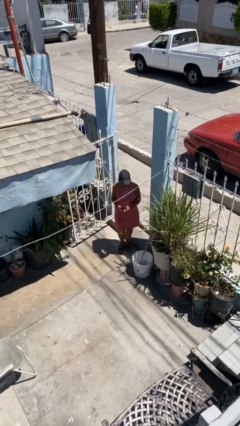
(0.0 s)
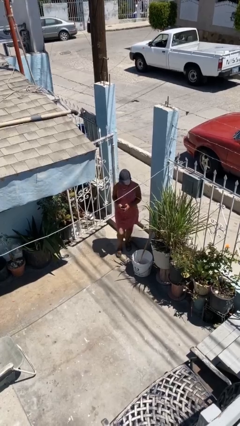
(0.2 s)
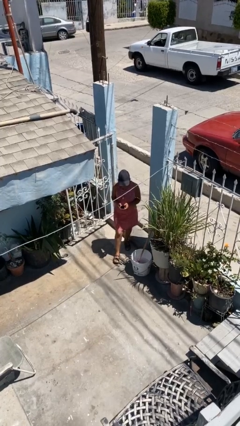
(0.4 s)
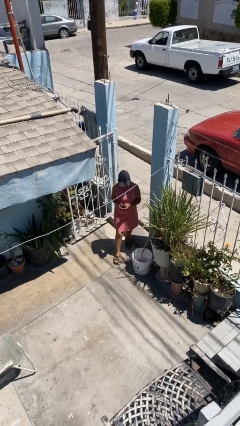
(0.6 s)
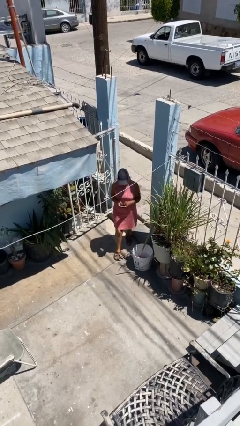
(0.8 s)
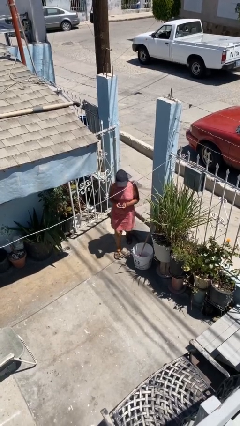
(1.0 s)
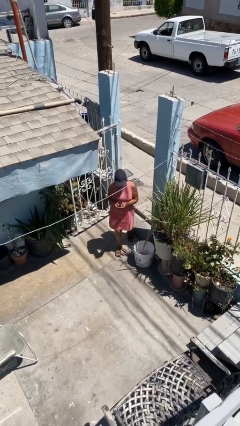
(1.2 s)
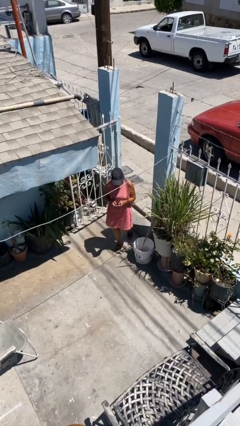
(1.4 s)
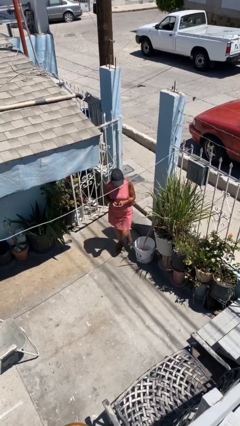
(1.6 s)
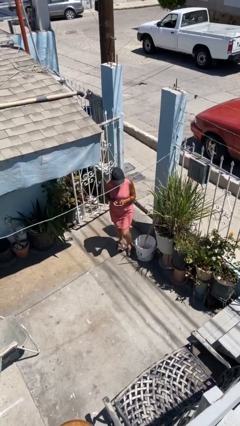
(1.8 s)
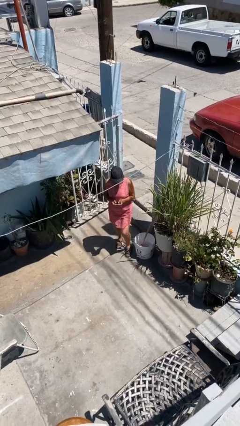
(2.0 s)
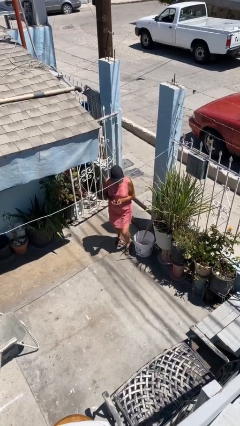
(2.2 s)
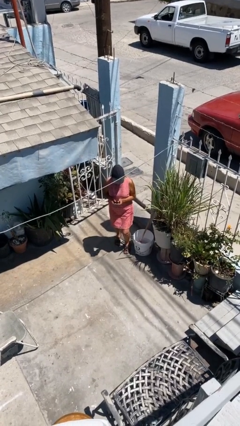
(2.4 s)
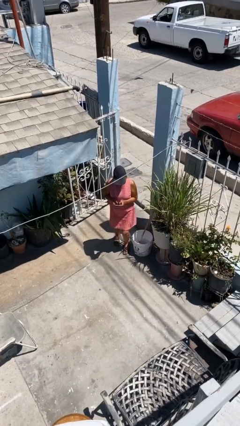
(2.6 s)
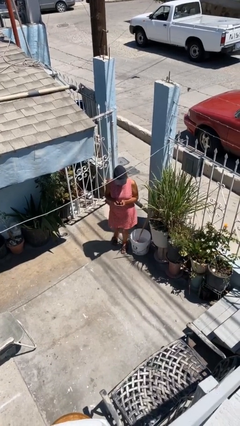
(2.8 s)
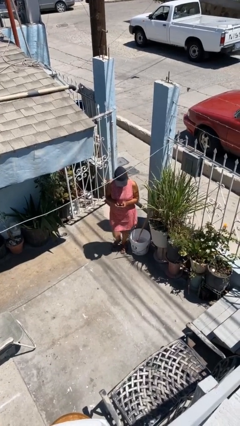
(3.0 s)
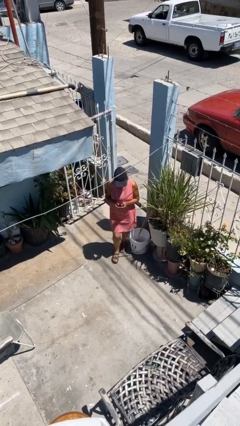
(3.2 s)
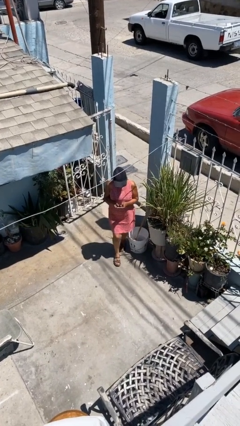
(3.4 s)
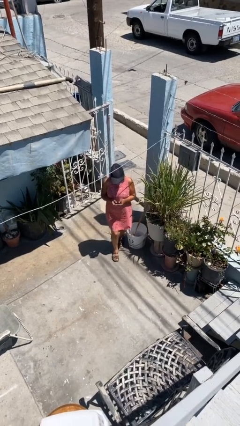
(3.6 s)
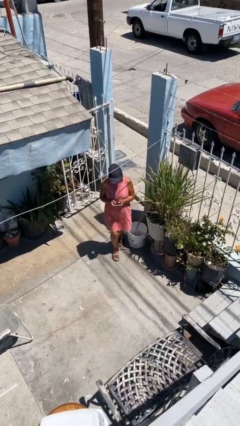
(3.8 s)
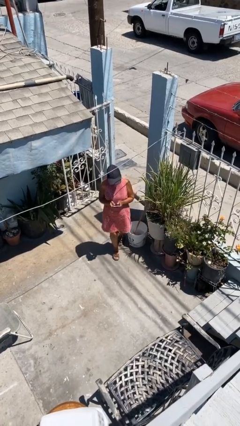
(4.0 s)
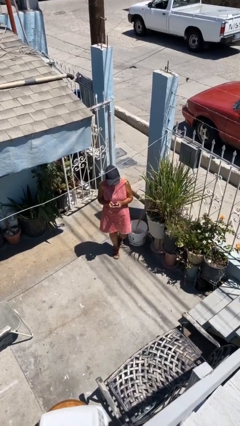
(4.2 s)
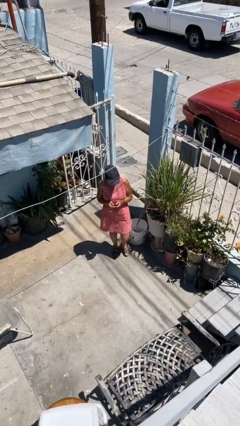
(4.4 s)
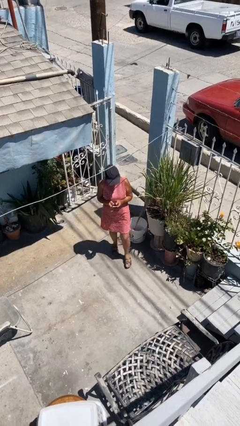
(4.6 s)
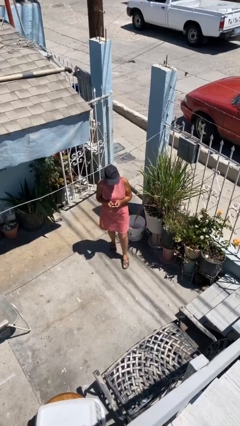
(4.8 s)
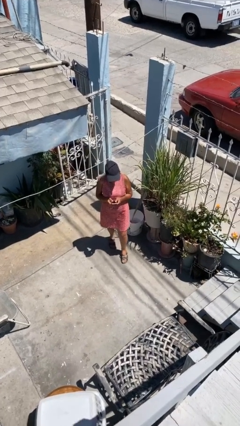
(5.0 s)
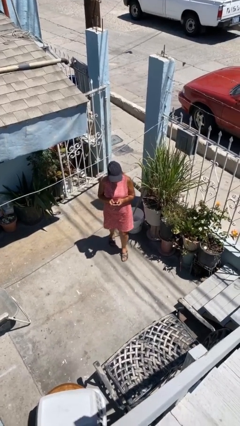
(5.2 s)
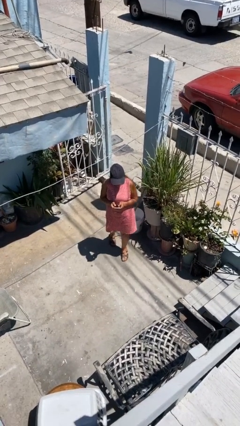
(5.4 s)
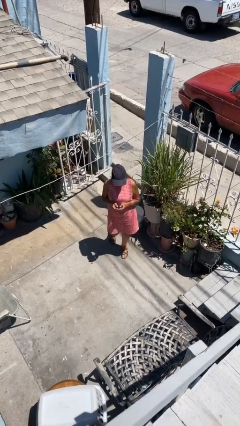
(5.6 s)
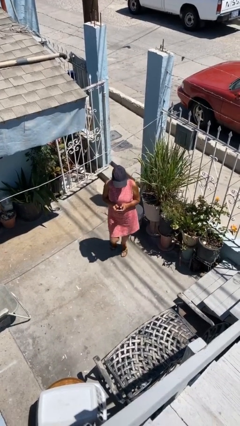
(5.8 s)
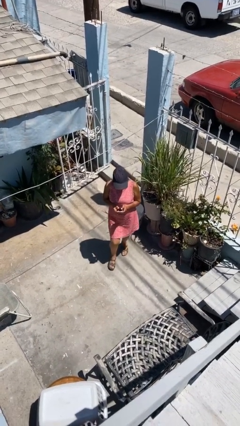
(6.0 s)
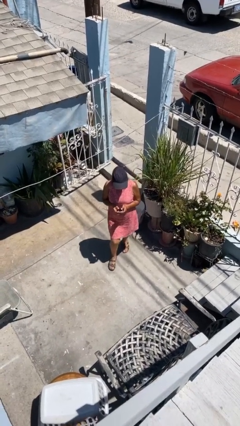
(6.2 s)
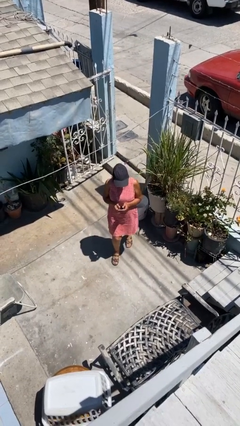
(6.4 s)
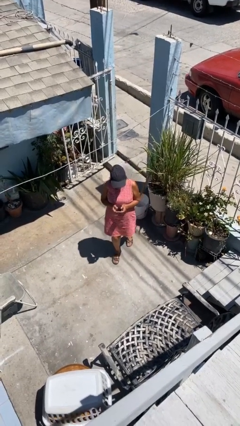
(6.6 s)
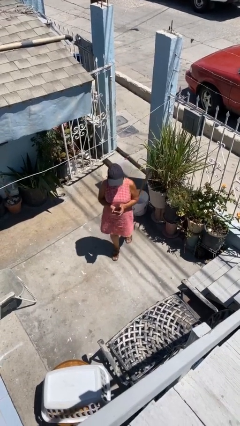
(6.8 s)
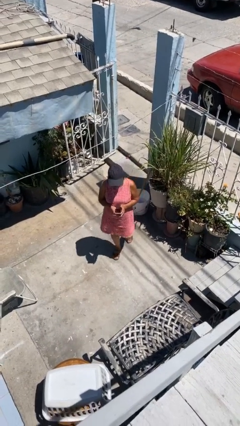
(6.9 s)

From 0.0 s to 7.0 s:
person texts on phone

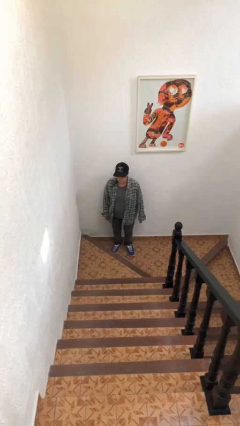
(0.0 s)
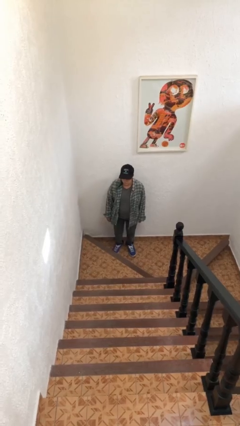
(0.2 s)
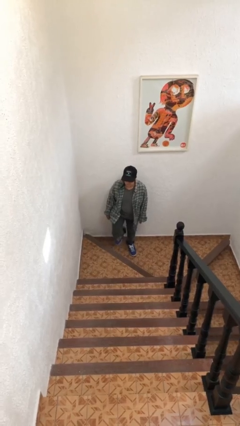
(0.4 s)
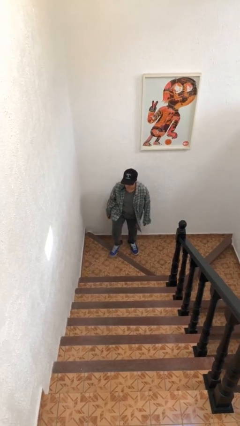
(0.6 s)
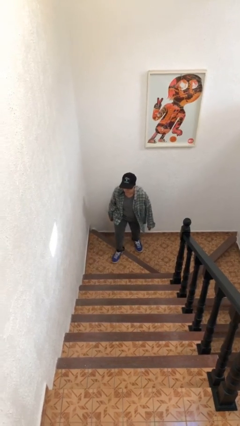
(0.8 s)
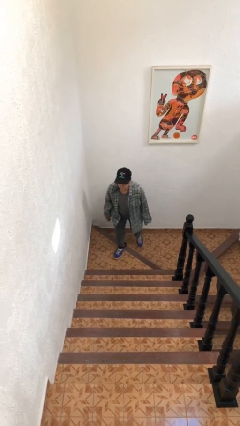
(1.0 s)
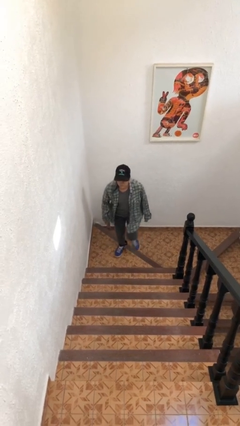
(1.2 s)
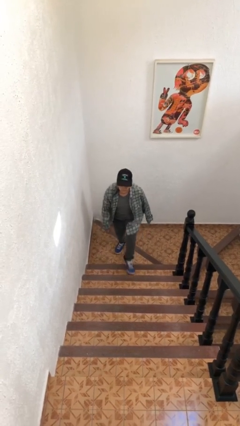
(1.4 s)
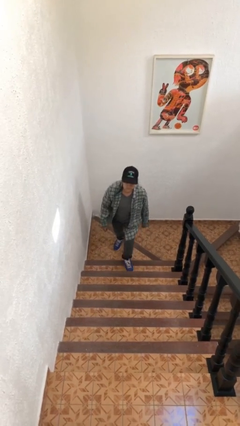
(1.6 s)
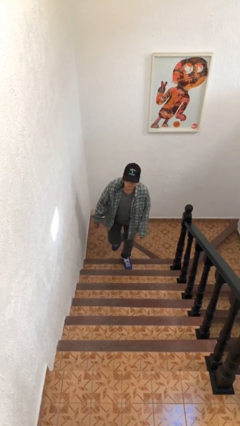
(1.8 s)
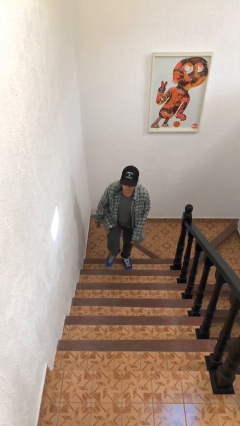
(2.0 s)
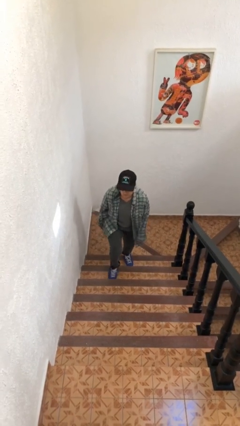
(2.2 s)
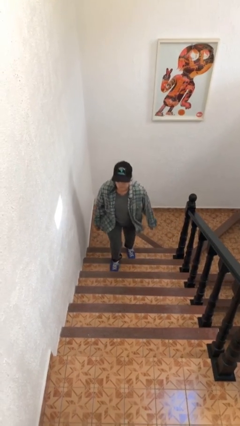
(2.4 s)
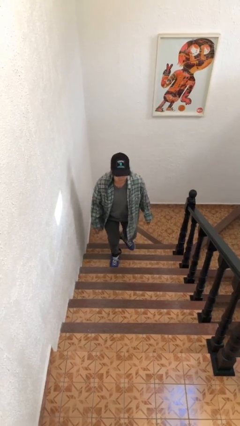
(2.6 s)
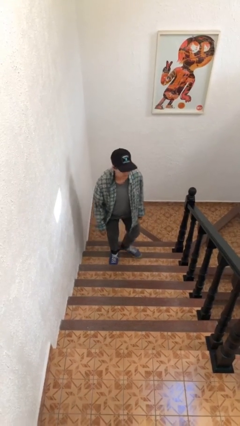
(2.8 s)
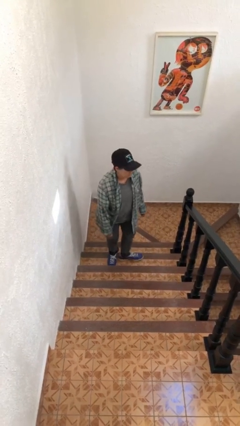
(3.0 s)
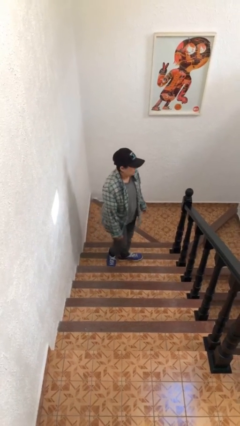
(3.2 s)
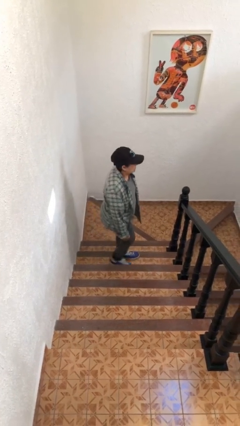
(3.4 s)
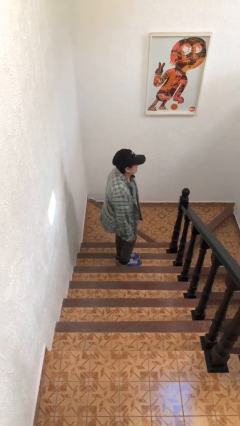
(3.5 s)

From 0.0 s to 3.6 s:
person climbs up stairs

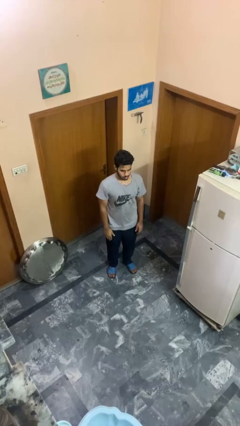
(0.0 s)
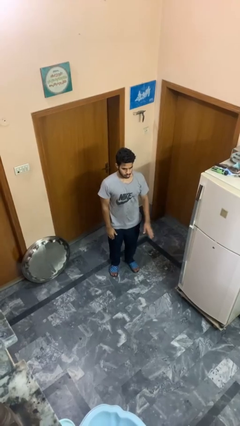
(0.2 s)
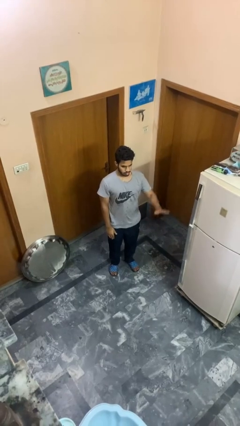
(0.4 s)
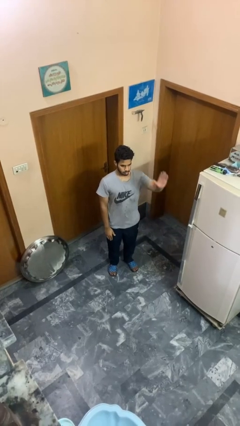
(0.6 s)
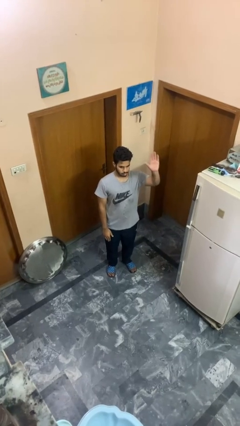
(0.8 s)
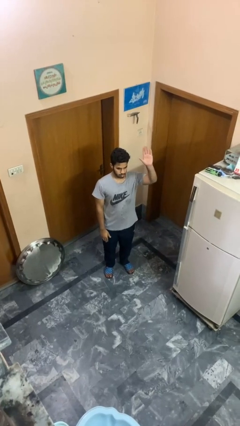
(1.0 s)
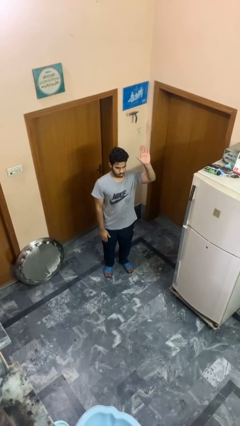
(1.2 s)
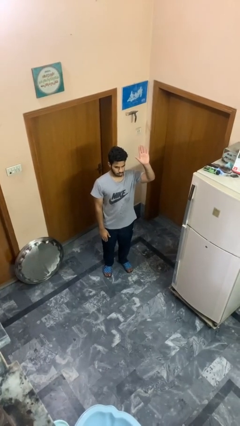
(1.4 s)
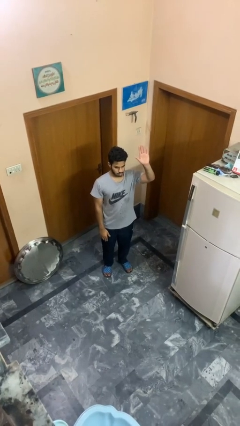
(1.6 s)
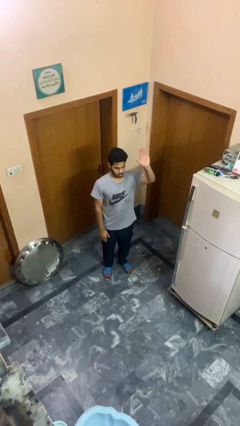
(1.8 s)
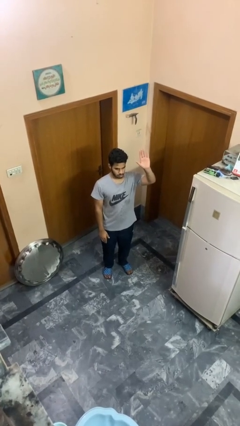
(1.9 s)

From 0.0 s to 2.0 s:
person gestures raise hand

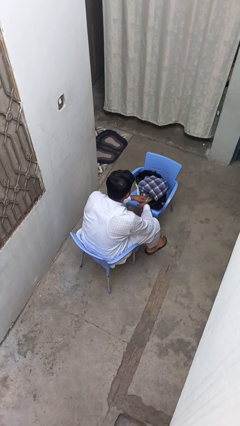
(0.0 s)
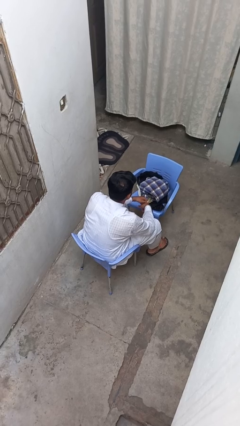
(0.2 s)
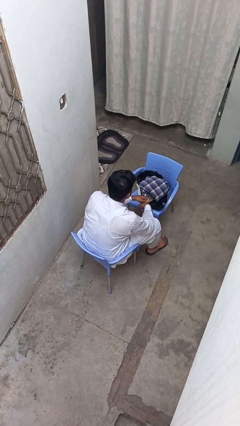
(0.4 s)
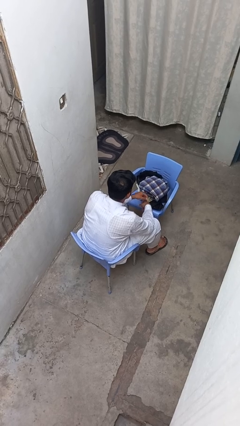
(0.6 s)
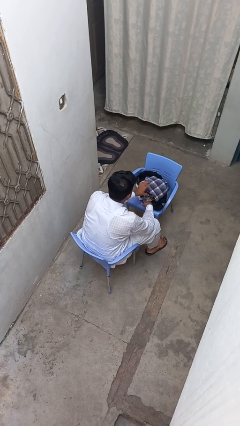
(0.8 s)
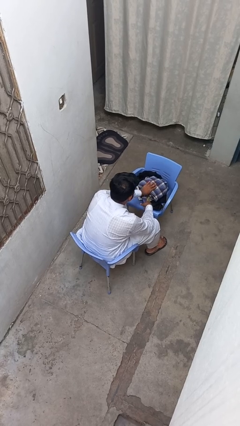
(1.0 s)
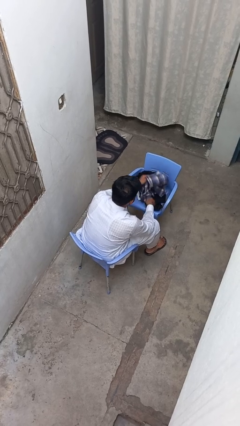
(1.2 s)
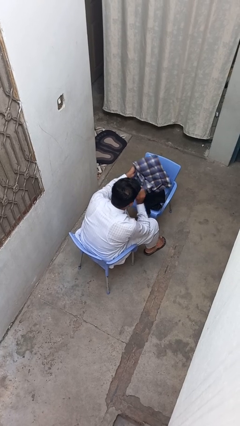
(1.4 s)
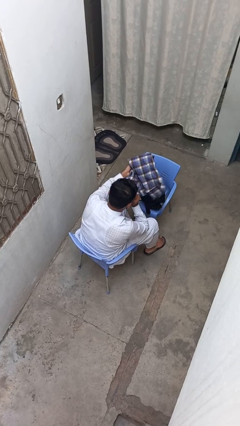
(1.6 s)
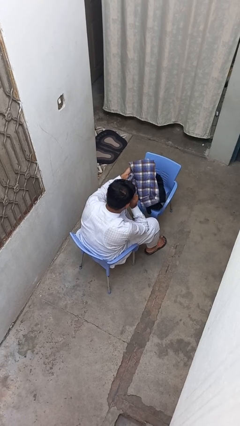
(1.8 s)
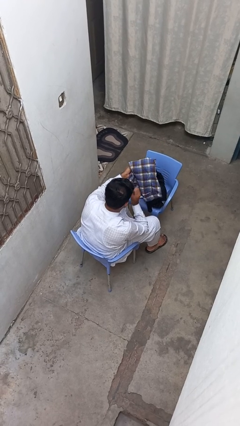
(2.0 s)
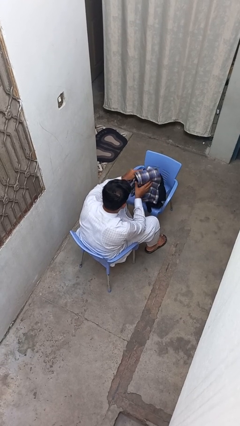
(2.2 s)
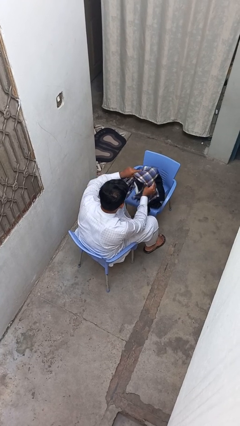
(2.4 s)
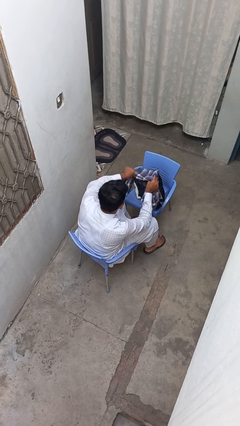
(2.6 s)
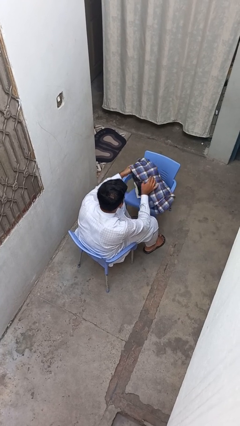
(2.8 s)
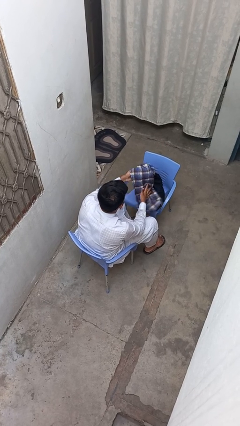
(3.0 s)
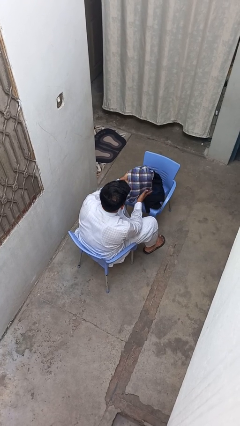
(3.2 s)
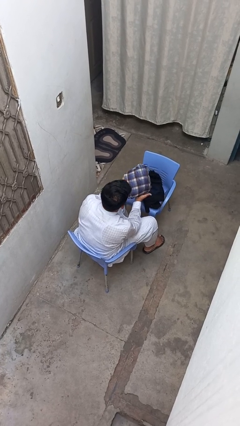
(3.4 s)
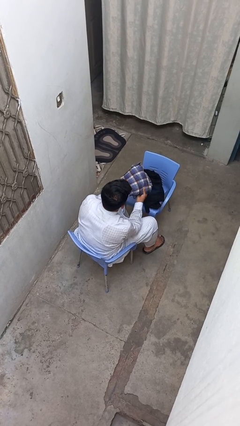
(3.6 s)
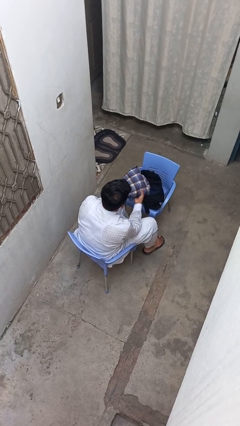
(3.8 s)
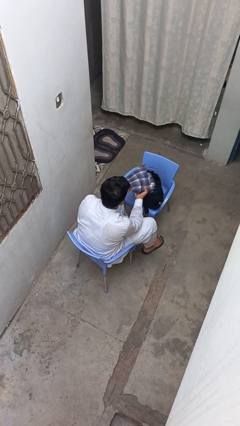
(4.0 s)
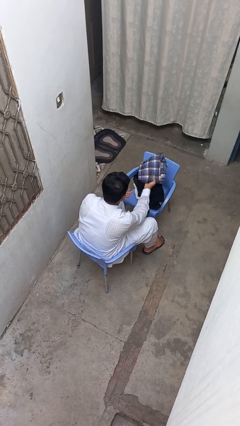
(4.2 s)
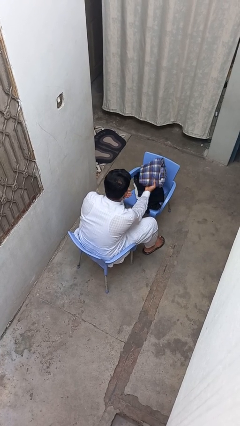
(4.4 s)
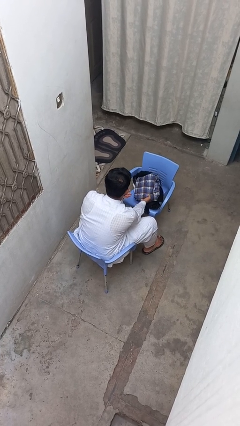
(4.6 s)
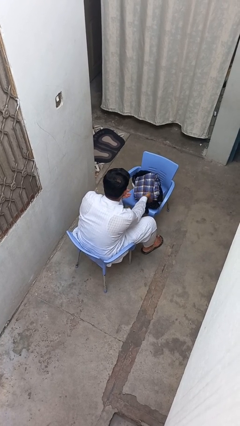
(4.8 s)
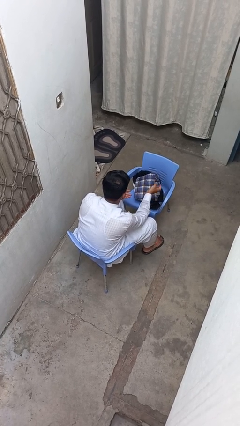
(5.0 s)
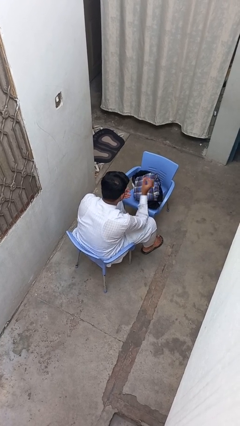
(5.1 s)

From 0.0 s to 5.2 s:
person folds shirt
